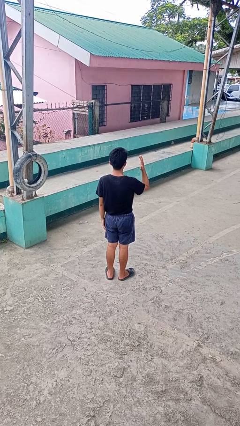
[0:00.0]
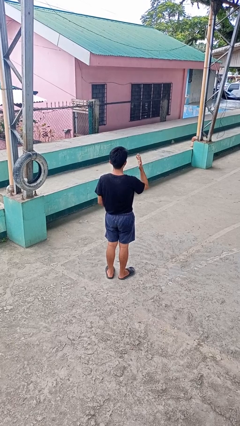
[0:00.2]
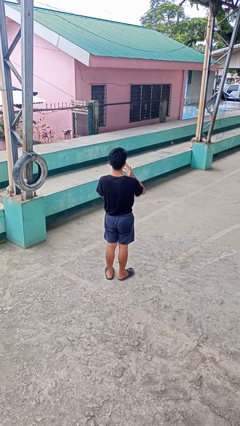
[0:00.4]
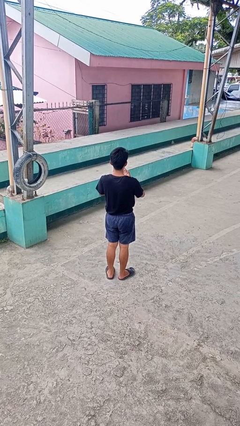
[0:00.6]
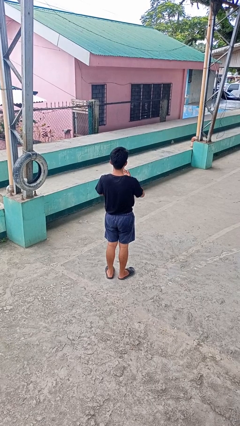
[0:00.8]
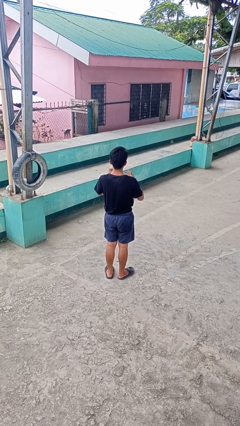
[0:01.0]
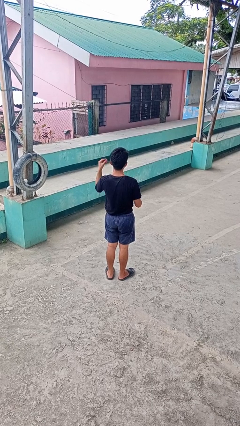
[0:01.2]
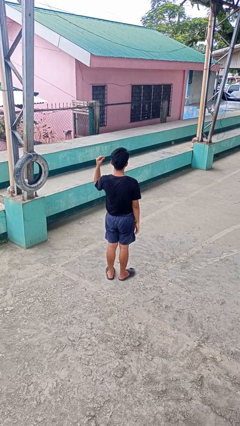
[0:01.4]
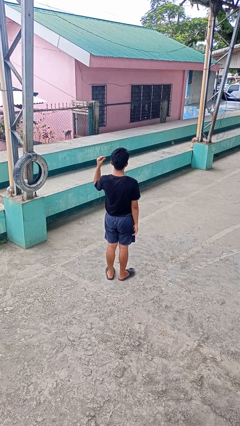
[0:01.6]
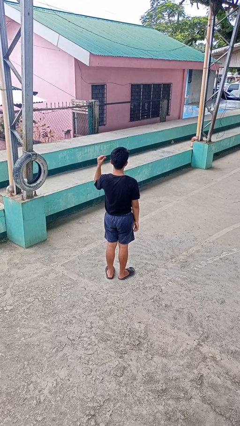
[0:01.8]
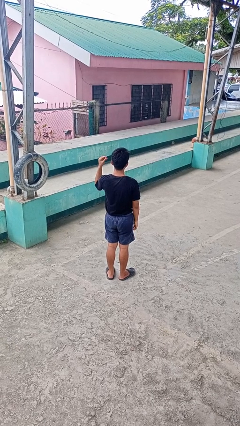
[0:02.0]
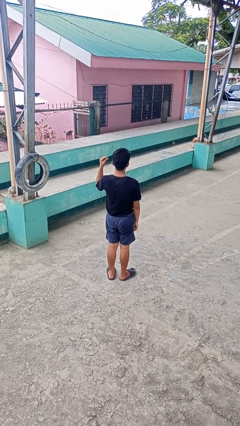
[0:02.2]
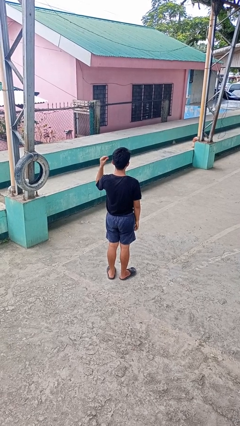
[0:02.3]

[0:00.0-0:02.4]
person takes off ring

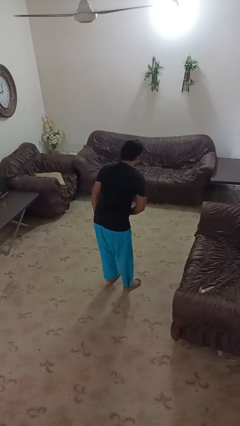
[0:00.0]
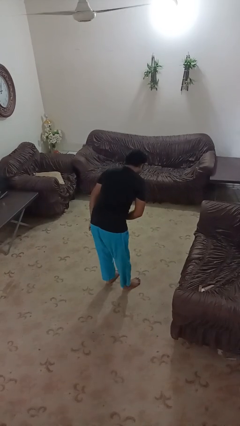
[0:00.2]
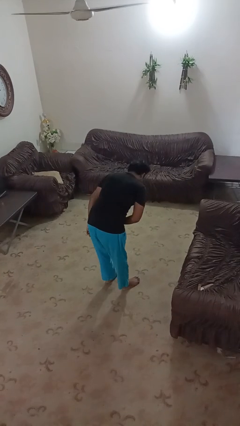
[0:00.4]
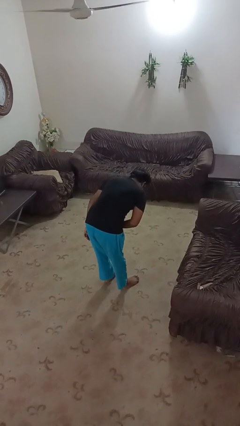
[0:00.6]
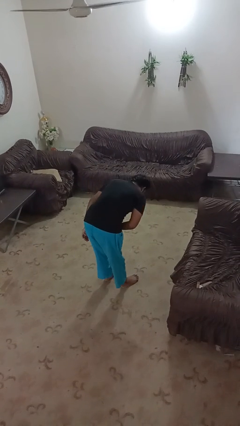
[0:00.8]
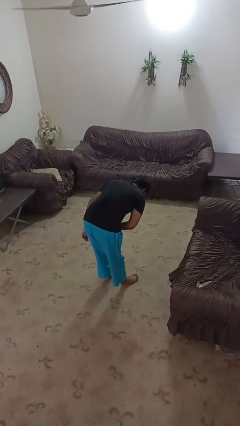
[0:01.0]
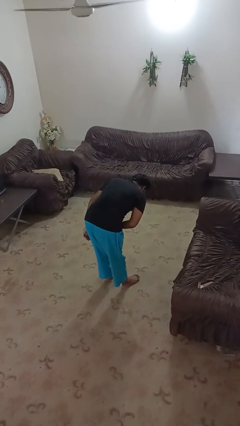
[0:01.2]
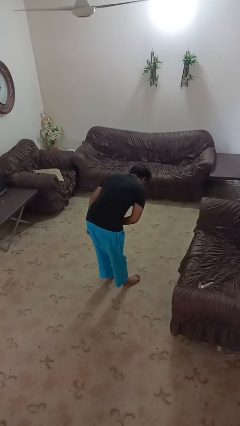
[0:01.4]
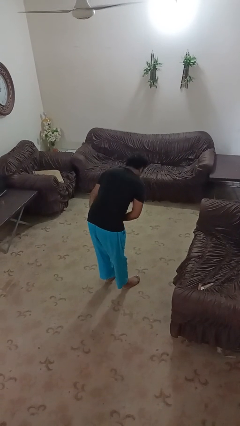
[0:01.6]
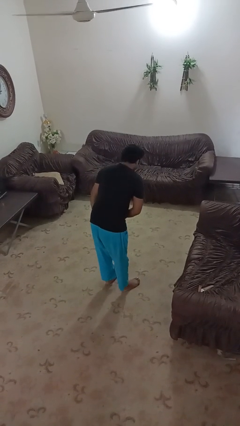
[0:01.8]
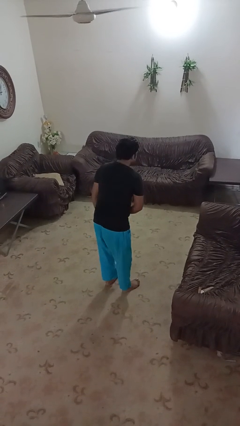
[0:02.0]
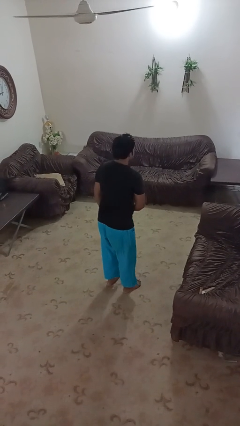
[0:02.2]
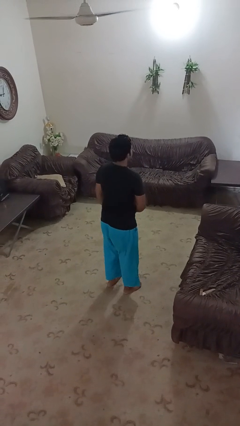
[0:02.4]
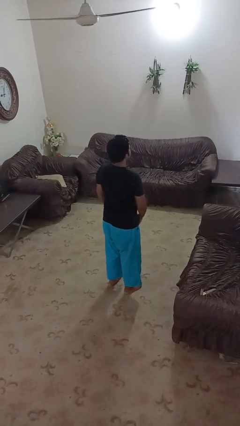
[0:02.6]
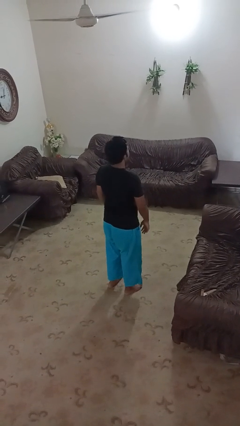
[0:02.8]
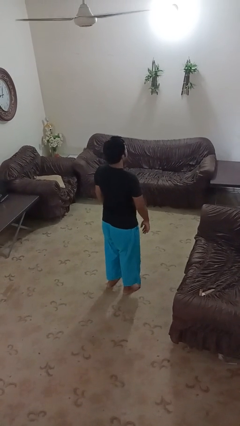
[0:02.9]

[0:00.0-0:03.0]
person bows

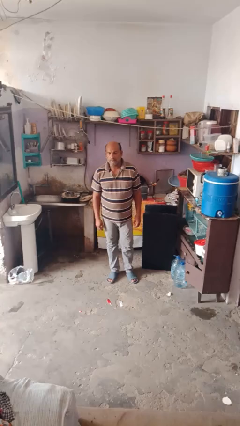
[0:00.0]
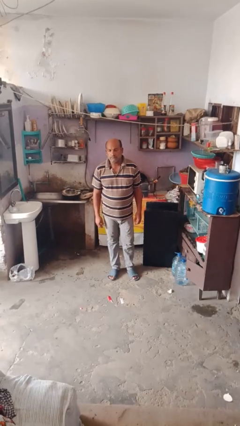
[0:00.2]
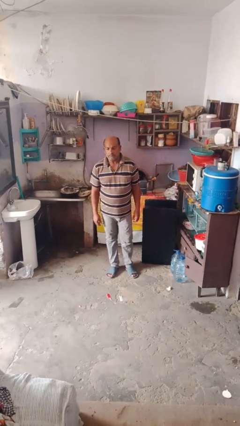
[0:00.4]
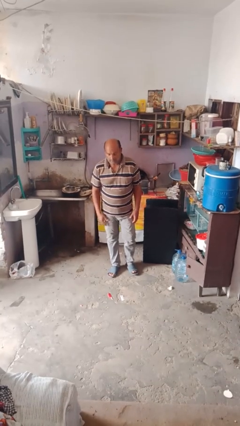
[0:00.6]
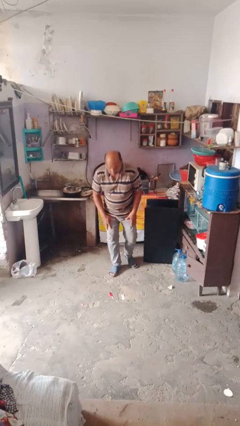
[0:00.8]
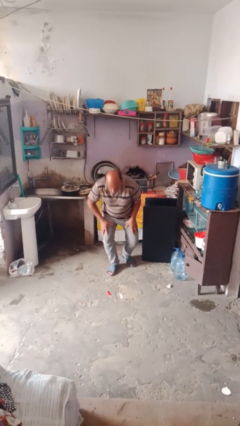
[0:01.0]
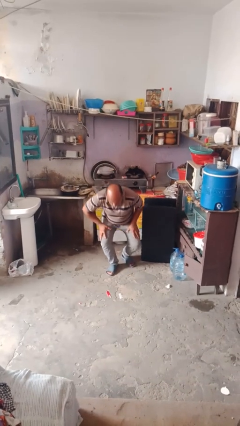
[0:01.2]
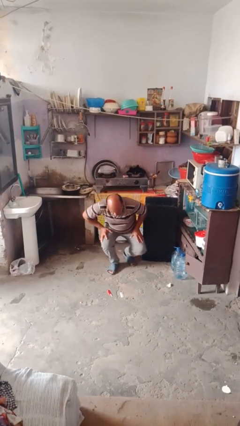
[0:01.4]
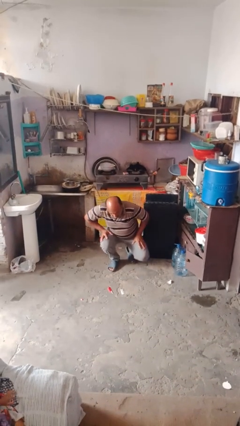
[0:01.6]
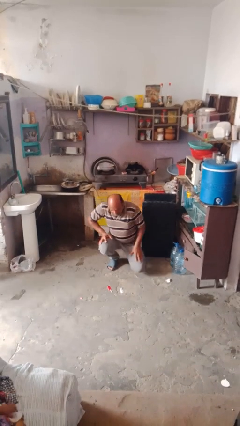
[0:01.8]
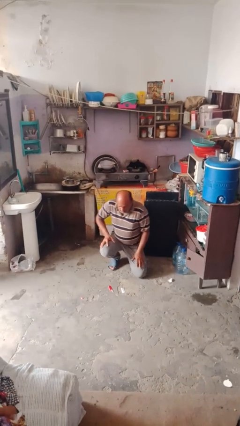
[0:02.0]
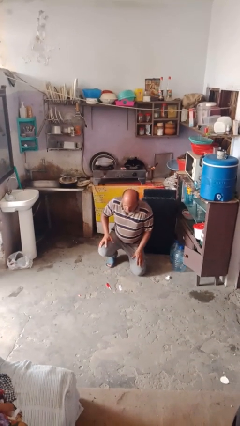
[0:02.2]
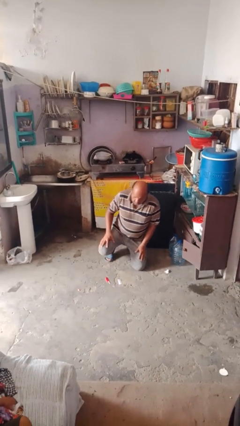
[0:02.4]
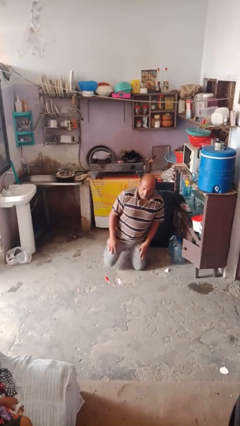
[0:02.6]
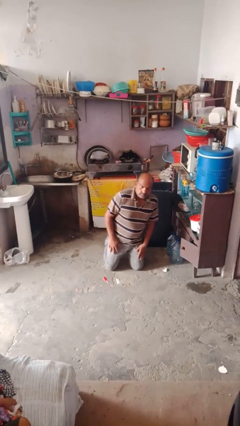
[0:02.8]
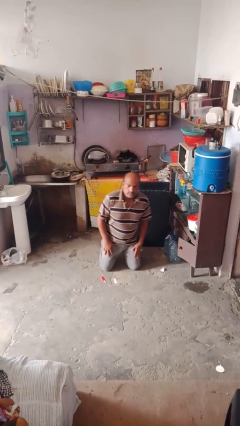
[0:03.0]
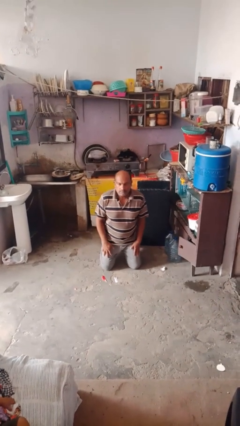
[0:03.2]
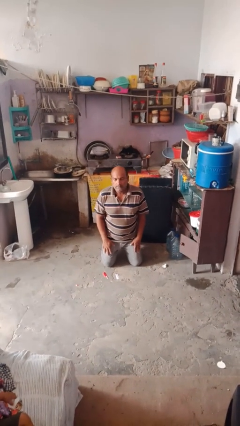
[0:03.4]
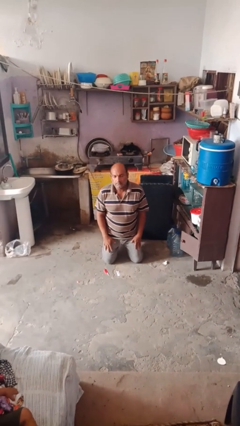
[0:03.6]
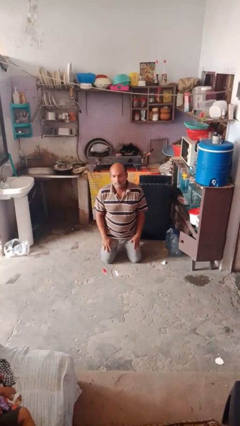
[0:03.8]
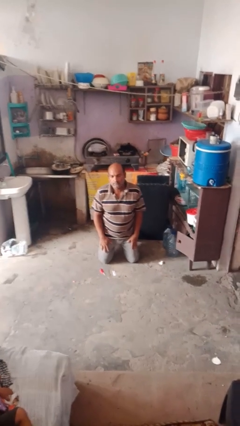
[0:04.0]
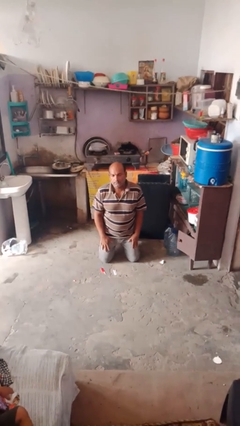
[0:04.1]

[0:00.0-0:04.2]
person kneels

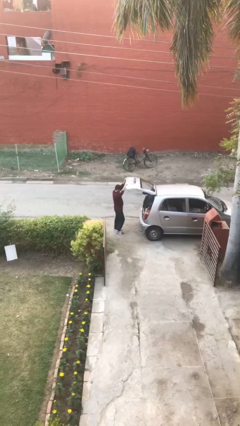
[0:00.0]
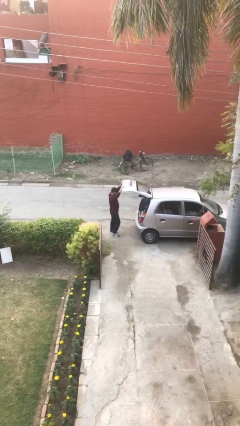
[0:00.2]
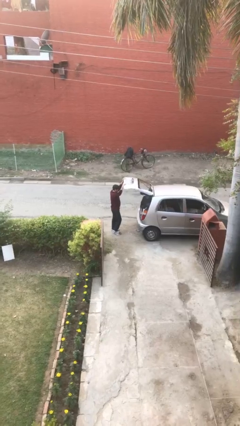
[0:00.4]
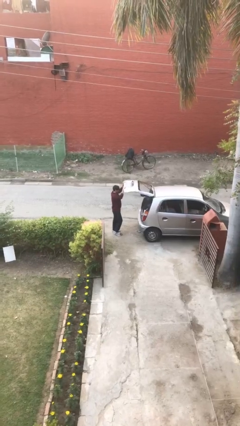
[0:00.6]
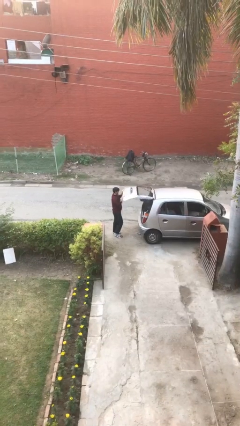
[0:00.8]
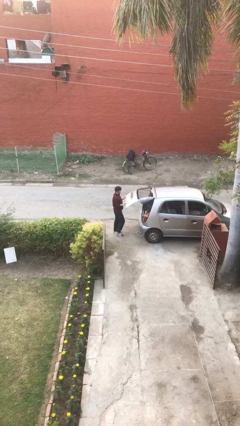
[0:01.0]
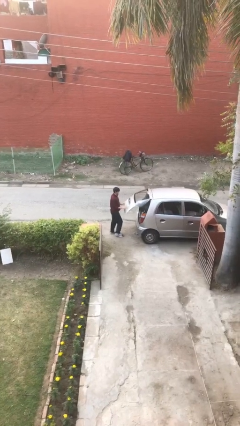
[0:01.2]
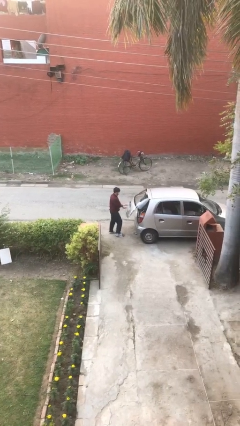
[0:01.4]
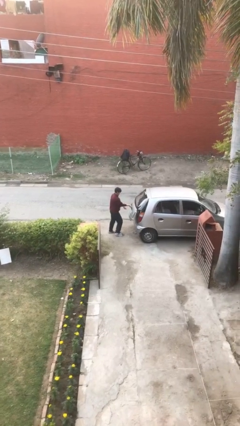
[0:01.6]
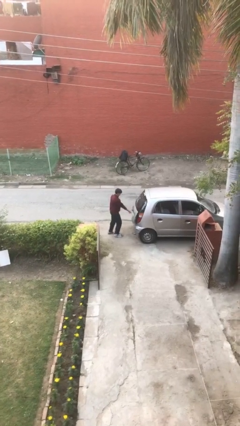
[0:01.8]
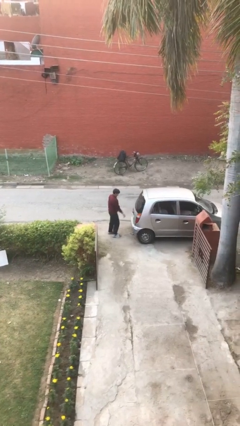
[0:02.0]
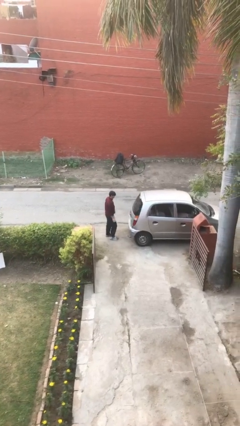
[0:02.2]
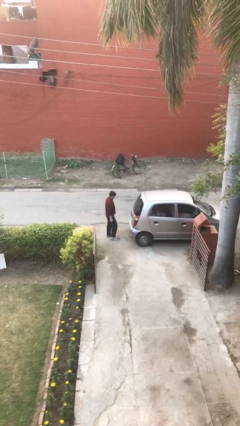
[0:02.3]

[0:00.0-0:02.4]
person closes car trunk

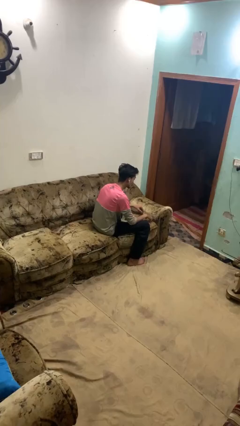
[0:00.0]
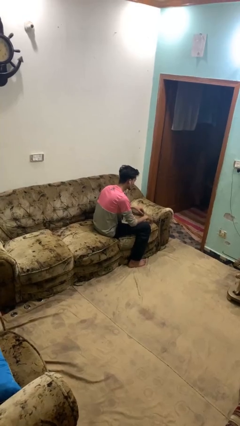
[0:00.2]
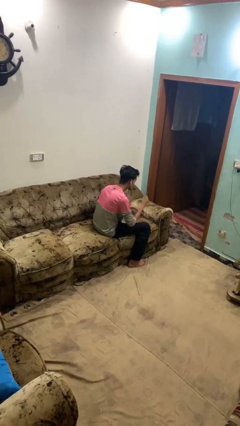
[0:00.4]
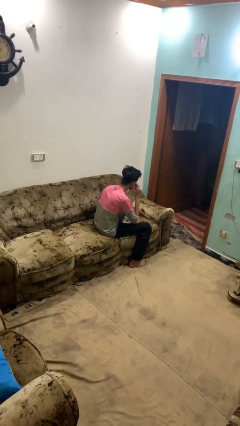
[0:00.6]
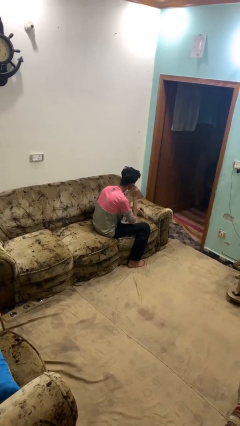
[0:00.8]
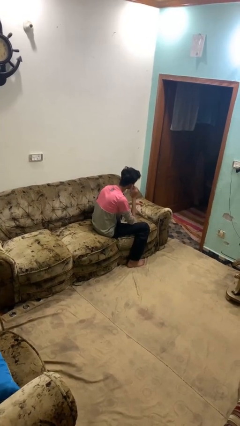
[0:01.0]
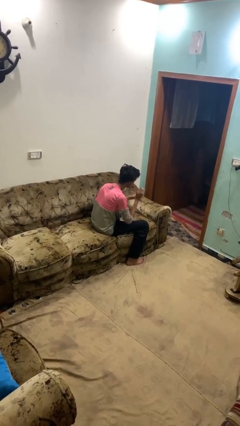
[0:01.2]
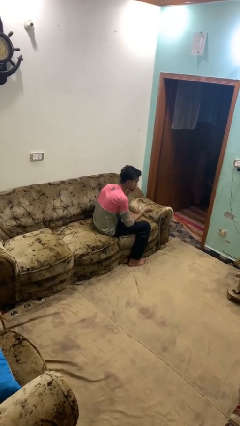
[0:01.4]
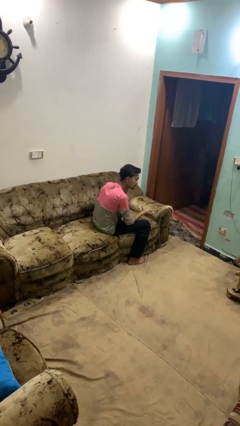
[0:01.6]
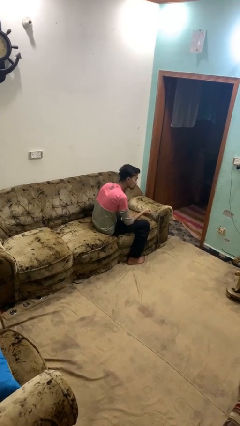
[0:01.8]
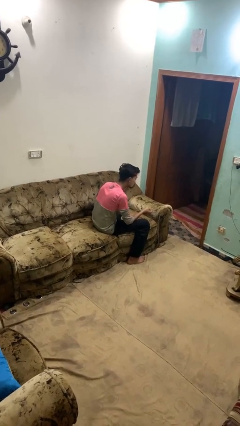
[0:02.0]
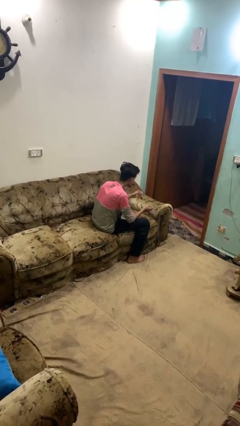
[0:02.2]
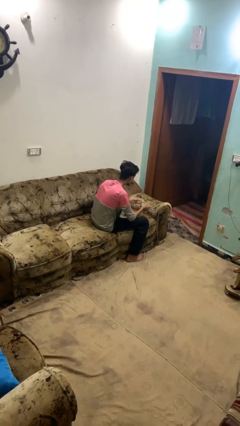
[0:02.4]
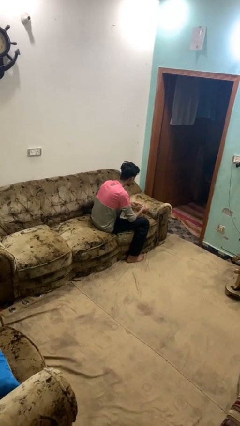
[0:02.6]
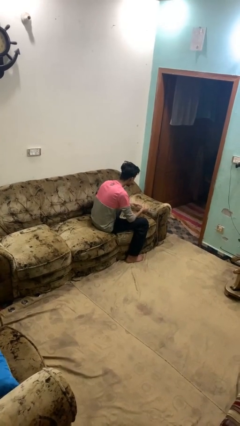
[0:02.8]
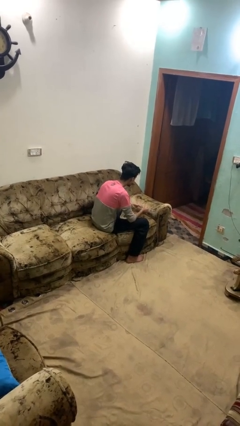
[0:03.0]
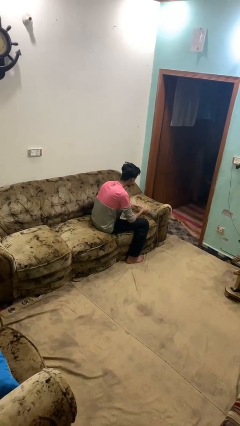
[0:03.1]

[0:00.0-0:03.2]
person takes off headphones

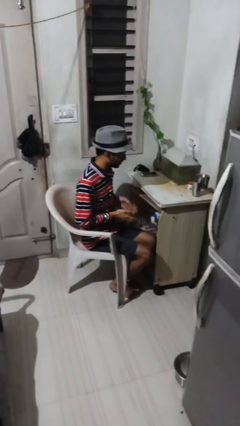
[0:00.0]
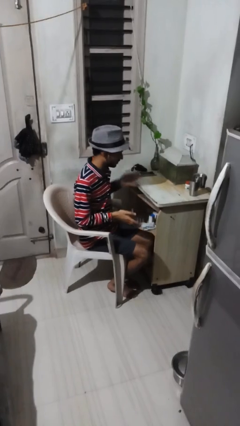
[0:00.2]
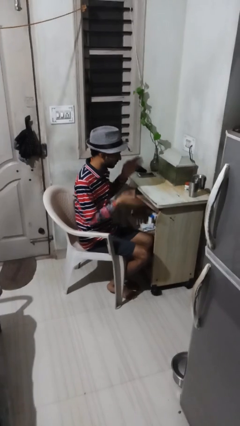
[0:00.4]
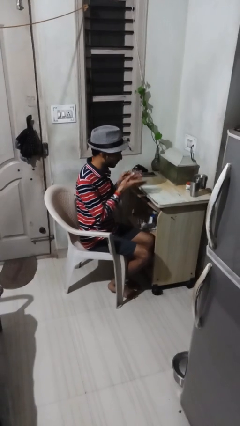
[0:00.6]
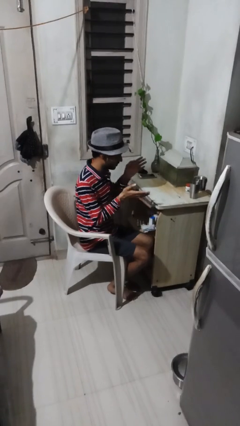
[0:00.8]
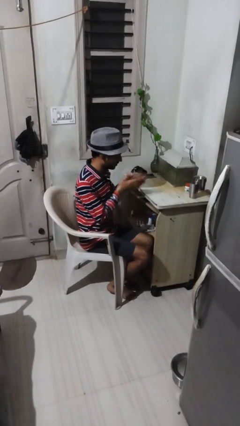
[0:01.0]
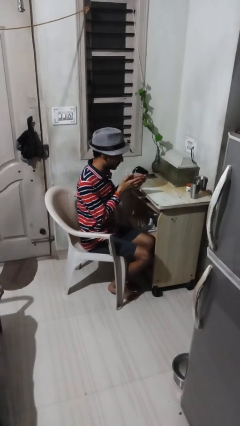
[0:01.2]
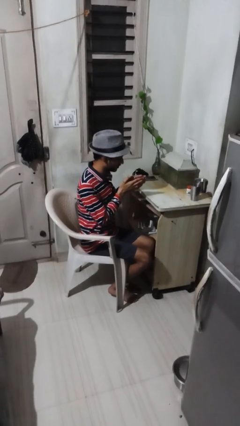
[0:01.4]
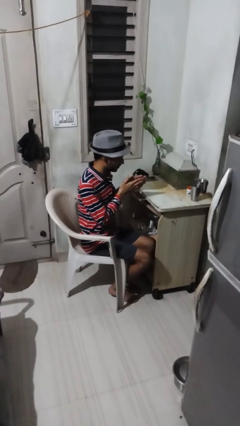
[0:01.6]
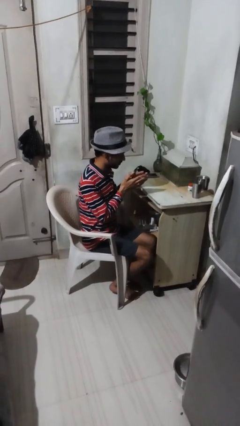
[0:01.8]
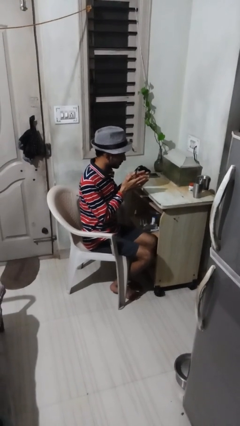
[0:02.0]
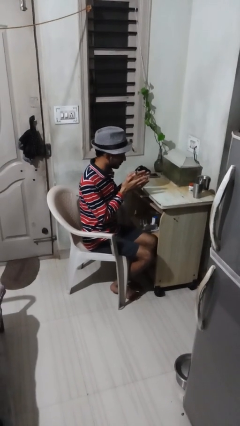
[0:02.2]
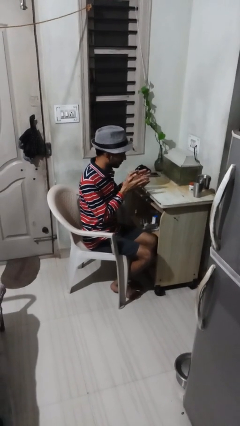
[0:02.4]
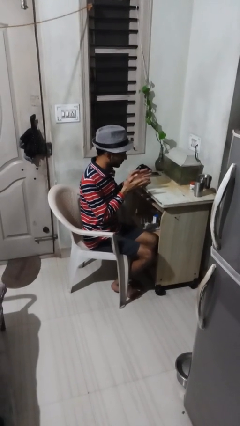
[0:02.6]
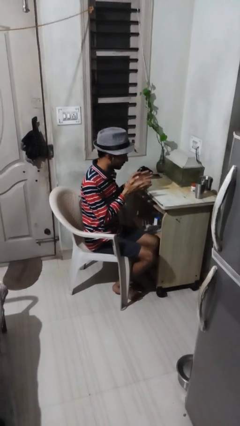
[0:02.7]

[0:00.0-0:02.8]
person claps hands
